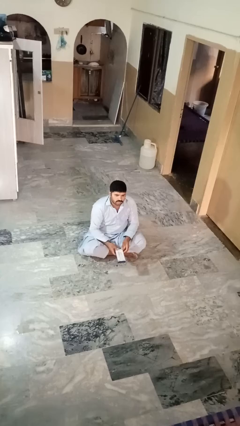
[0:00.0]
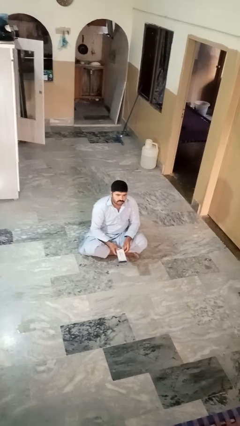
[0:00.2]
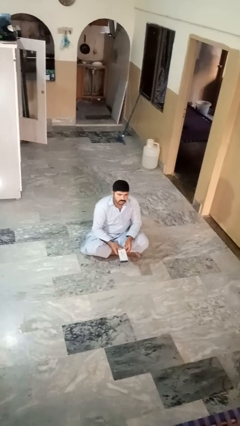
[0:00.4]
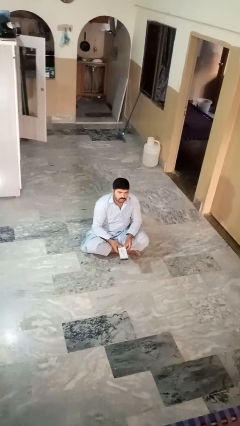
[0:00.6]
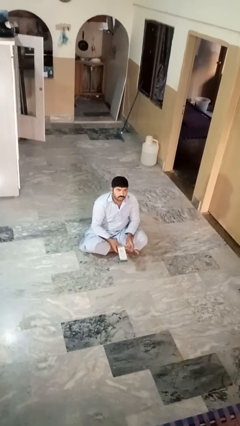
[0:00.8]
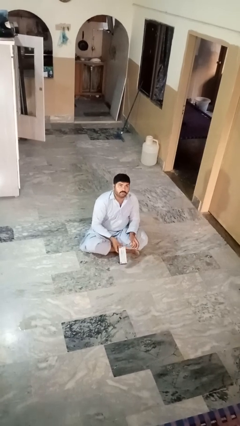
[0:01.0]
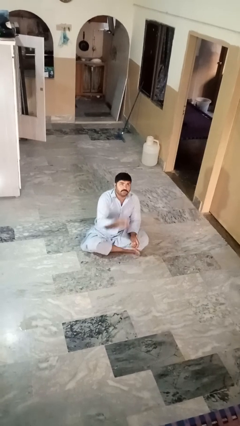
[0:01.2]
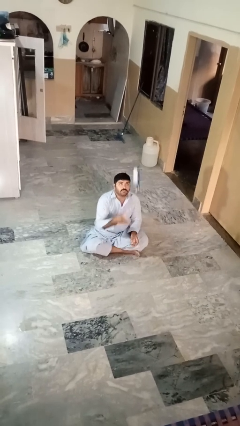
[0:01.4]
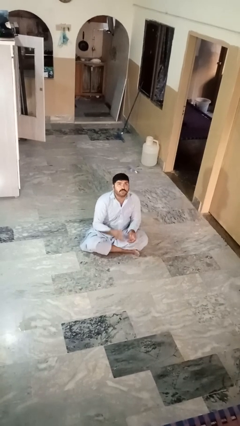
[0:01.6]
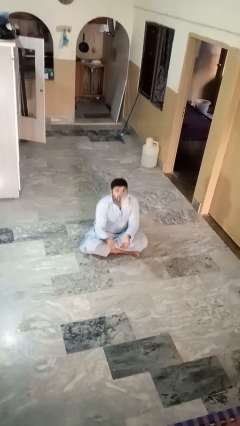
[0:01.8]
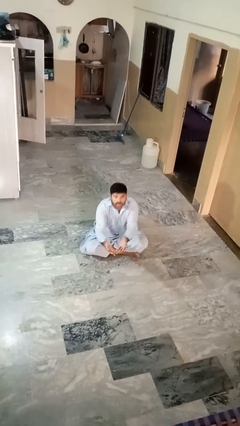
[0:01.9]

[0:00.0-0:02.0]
person drops object

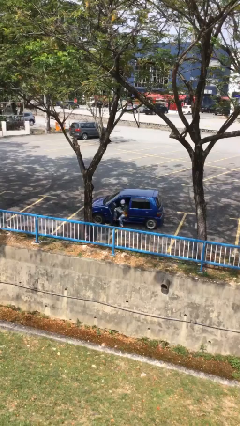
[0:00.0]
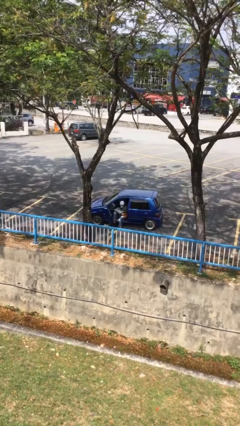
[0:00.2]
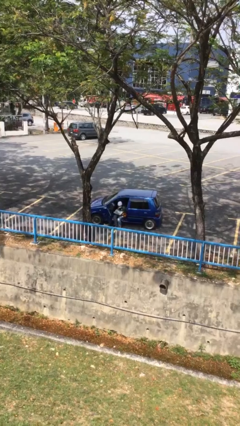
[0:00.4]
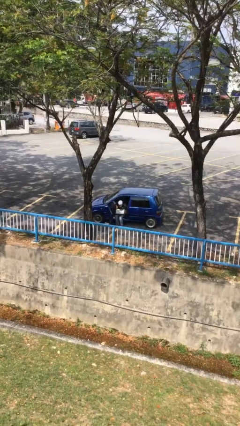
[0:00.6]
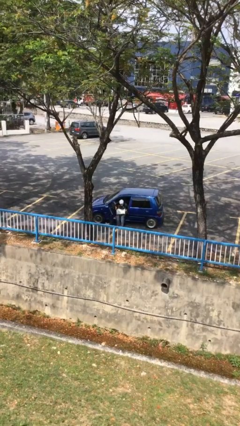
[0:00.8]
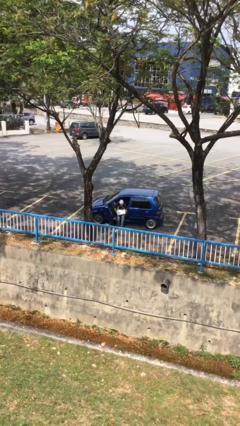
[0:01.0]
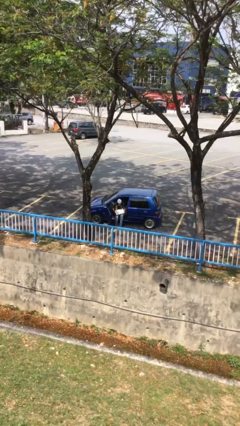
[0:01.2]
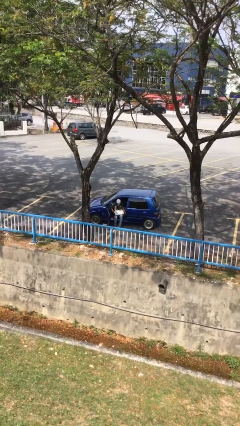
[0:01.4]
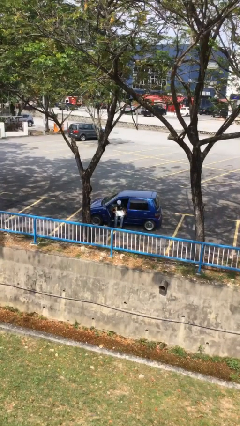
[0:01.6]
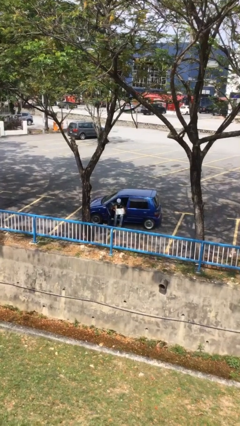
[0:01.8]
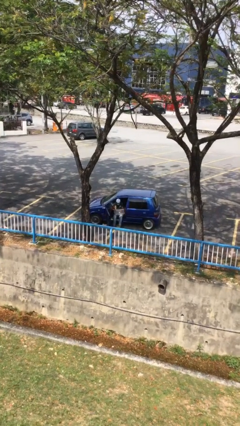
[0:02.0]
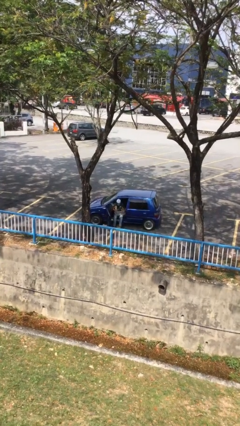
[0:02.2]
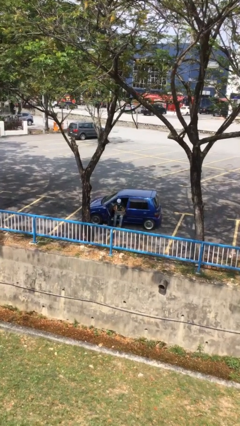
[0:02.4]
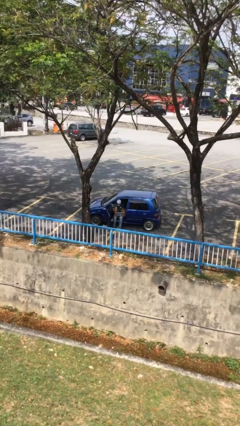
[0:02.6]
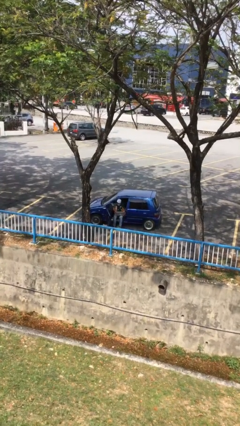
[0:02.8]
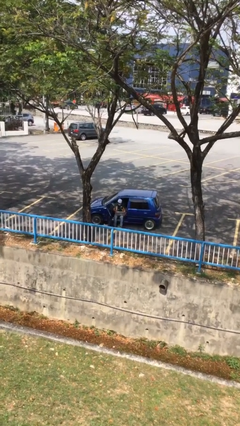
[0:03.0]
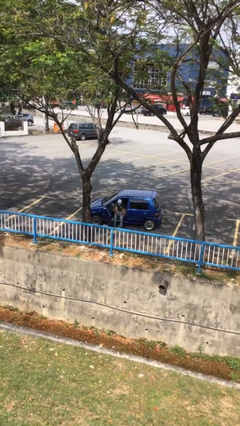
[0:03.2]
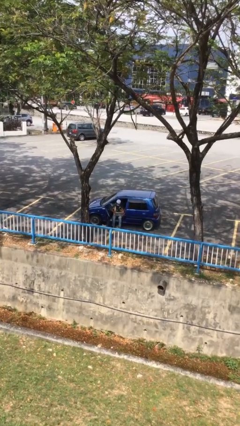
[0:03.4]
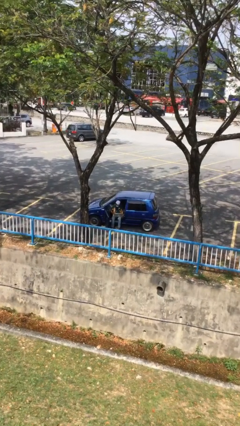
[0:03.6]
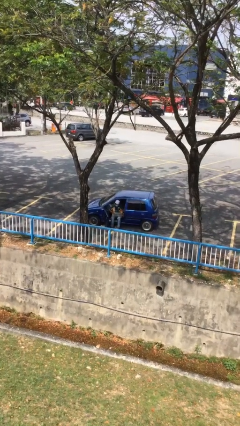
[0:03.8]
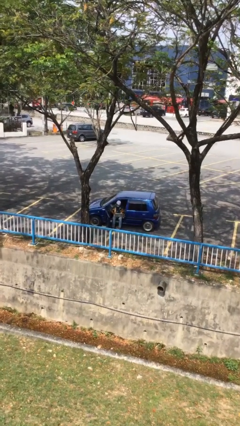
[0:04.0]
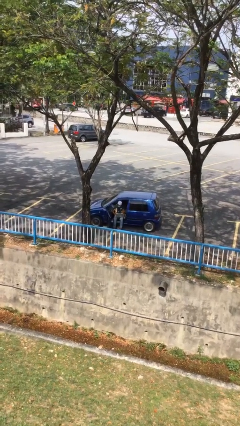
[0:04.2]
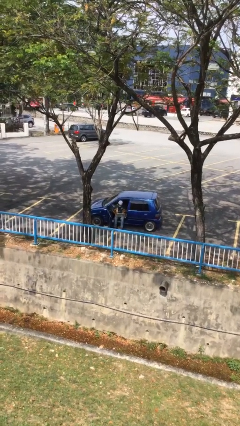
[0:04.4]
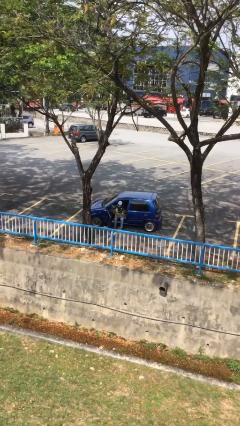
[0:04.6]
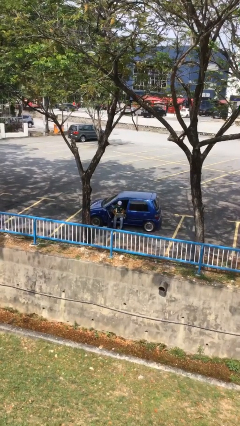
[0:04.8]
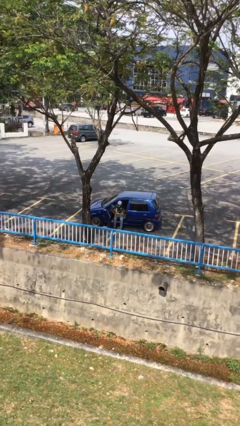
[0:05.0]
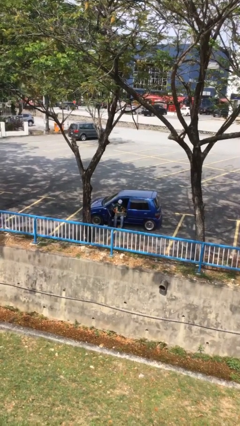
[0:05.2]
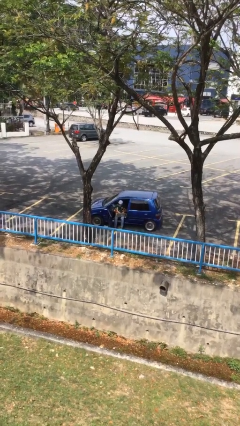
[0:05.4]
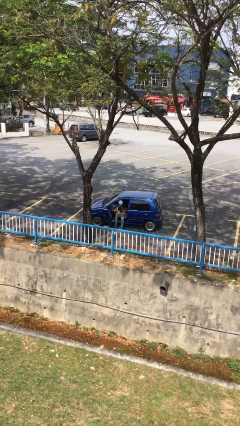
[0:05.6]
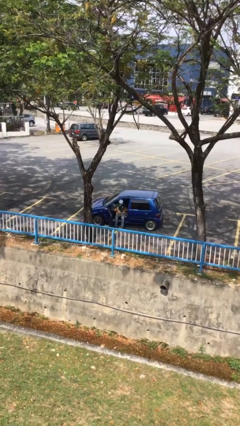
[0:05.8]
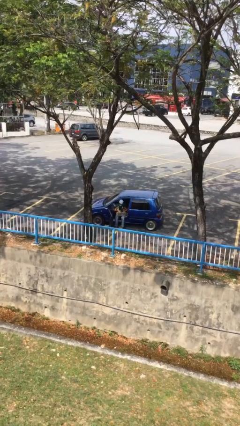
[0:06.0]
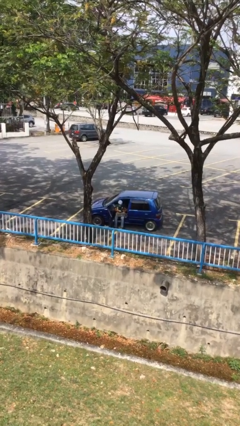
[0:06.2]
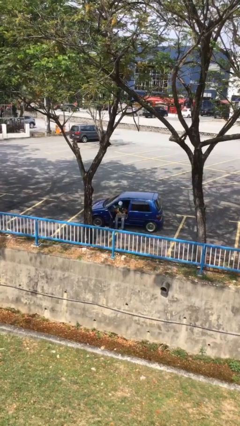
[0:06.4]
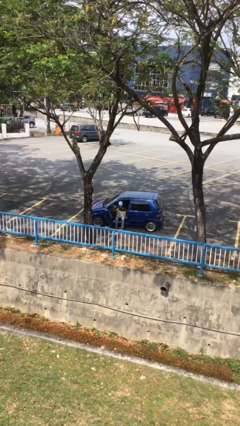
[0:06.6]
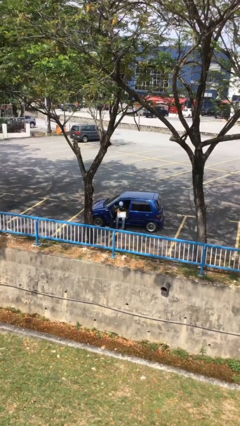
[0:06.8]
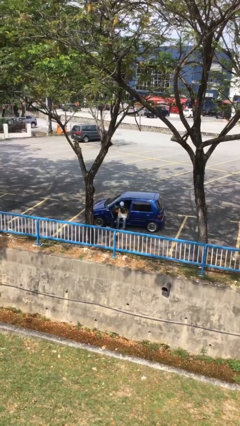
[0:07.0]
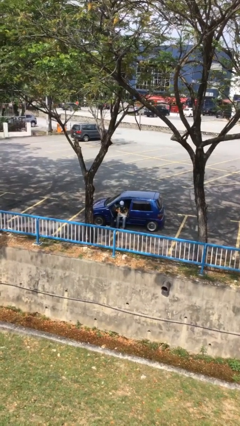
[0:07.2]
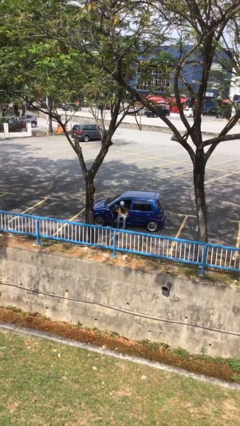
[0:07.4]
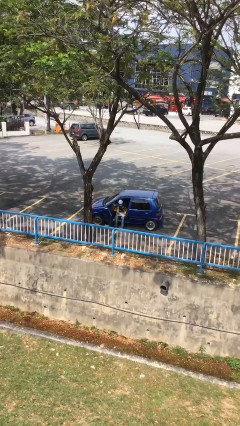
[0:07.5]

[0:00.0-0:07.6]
person interacts with laptop

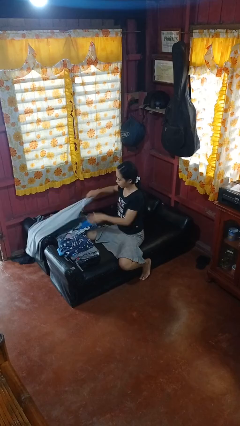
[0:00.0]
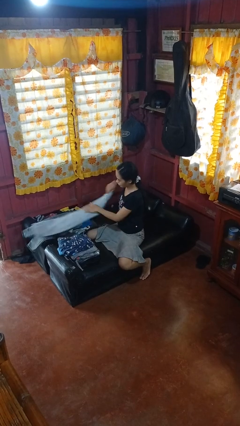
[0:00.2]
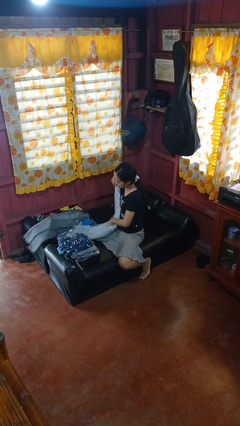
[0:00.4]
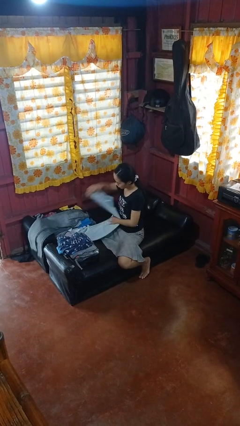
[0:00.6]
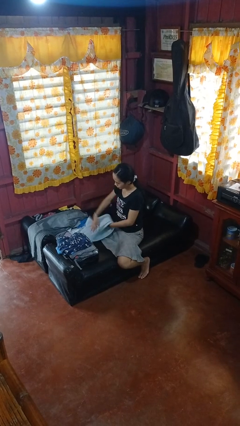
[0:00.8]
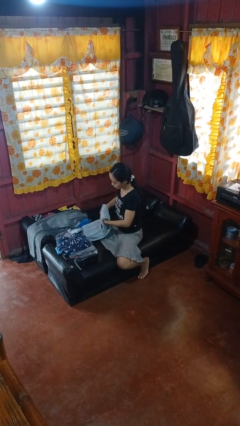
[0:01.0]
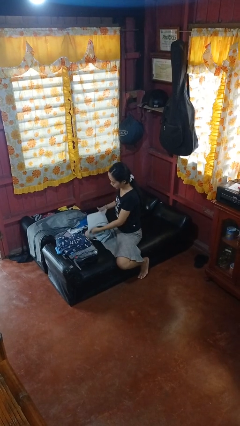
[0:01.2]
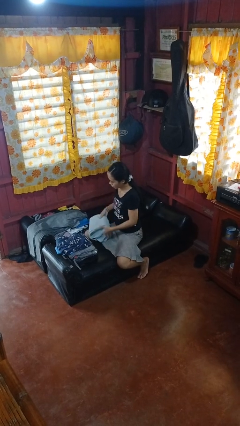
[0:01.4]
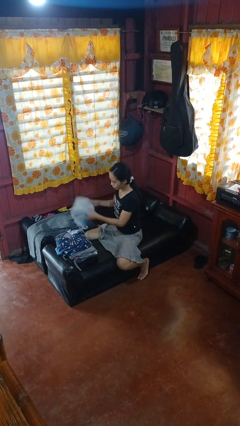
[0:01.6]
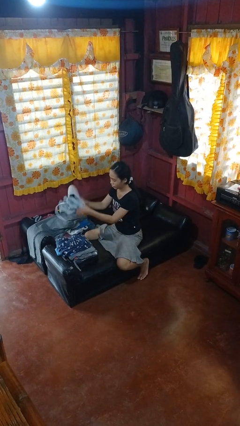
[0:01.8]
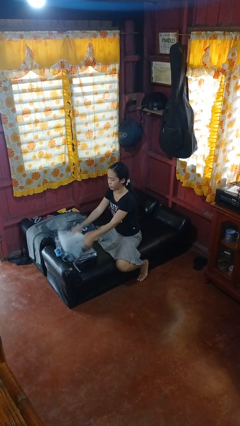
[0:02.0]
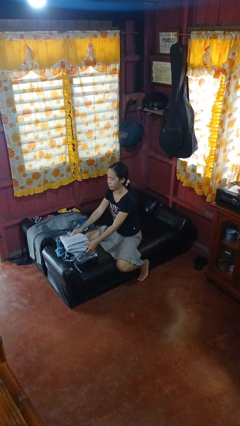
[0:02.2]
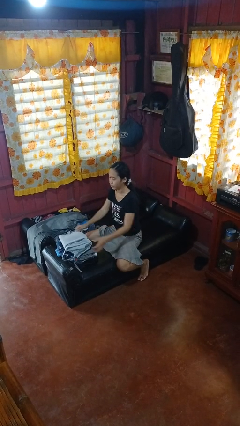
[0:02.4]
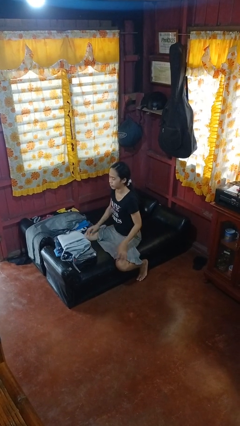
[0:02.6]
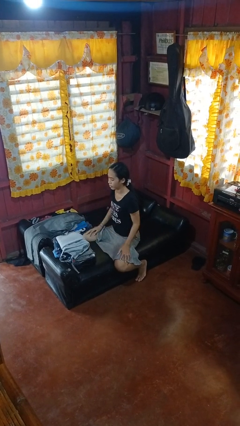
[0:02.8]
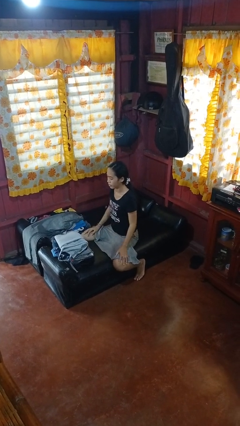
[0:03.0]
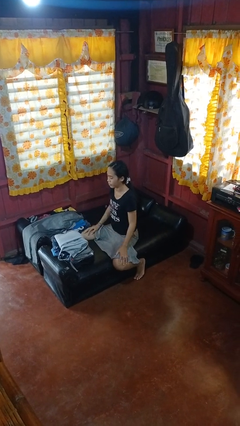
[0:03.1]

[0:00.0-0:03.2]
person folds pants

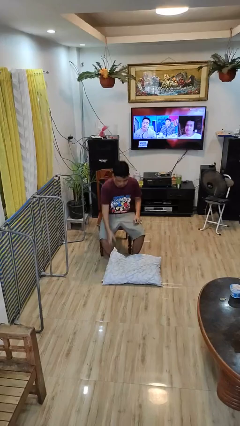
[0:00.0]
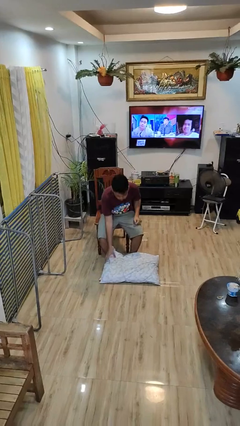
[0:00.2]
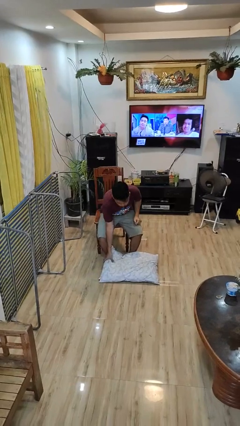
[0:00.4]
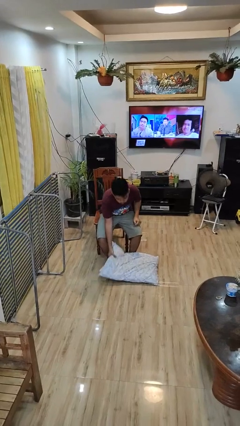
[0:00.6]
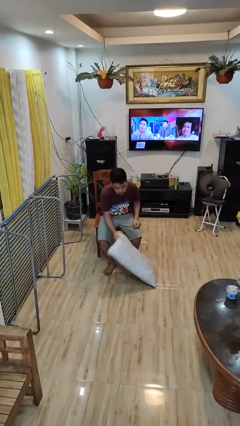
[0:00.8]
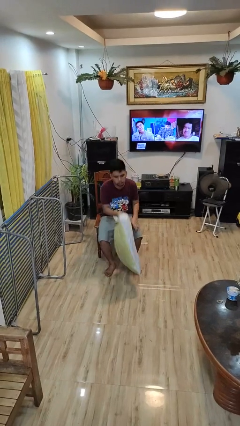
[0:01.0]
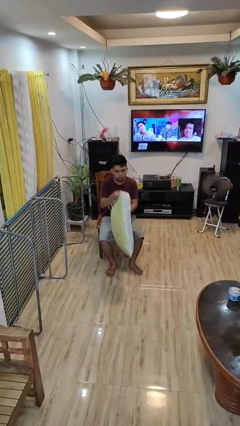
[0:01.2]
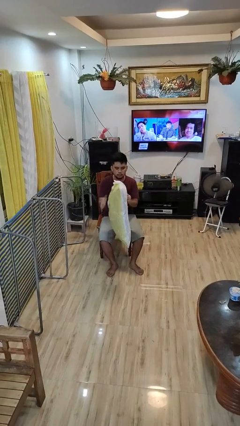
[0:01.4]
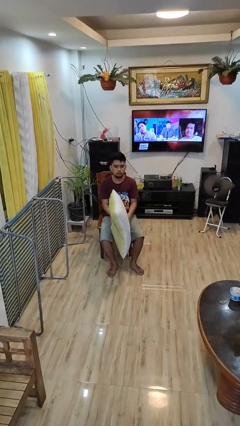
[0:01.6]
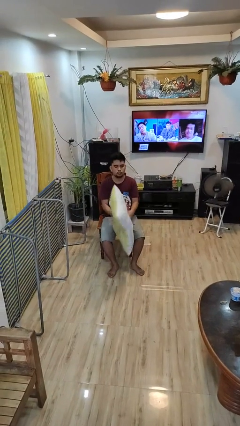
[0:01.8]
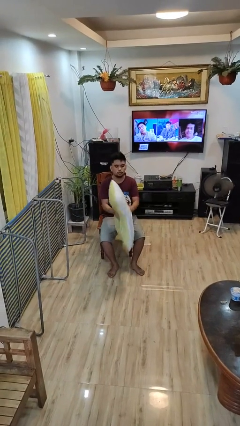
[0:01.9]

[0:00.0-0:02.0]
person picks up object from floor

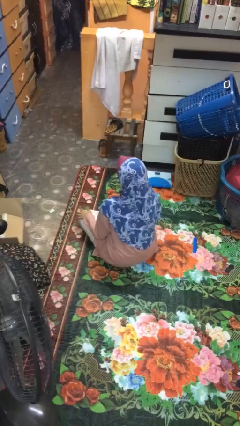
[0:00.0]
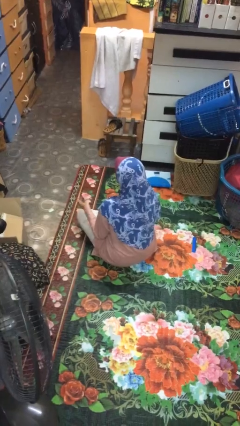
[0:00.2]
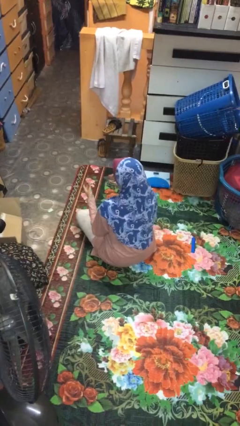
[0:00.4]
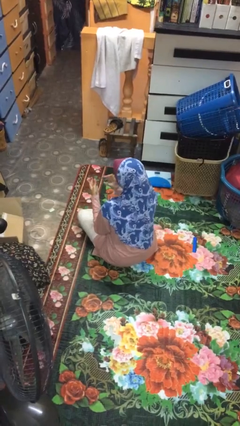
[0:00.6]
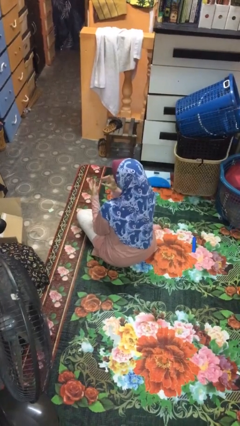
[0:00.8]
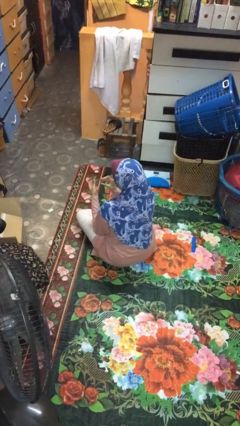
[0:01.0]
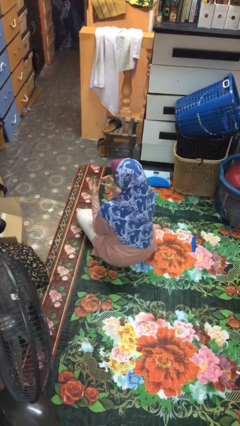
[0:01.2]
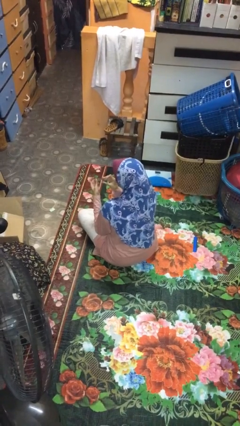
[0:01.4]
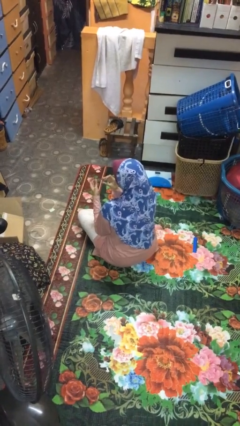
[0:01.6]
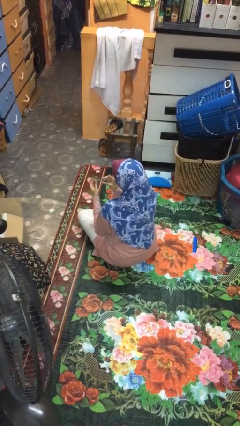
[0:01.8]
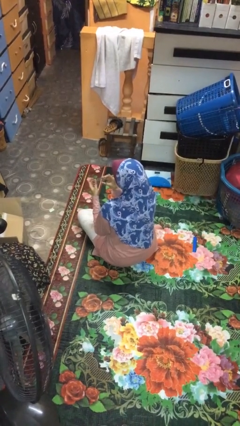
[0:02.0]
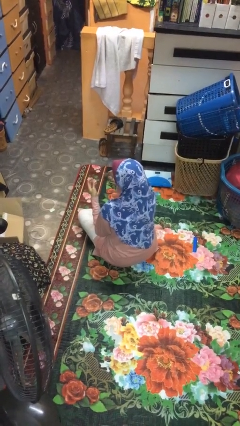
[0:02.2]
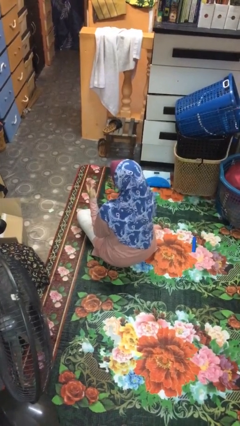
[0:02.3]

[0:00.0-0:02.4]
person clips fingernails

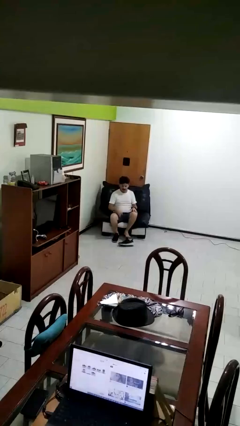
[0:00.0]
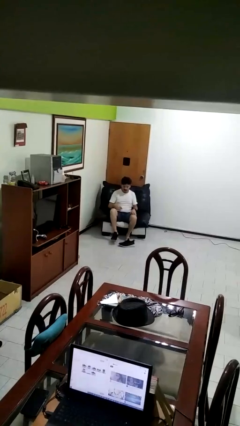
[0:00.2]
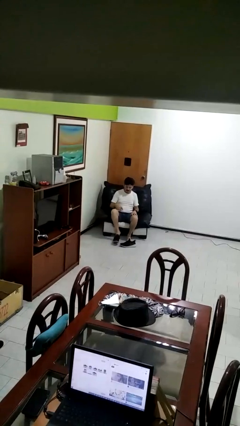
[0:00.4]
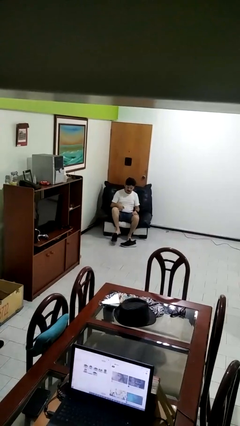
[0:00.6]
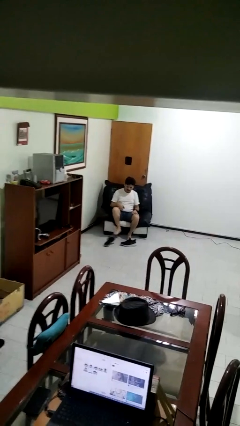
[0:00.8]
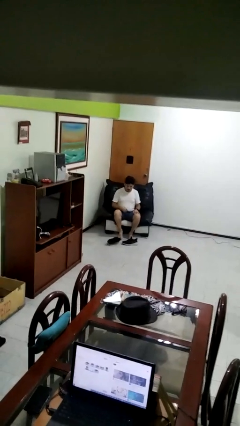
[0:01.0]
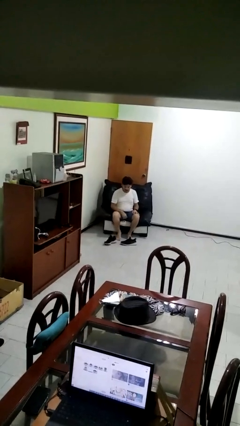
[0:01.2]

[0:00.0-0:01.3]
person takes off shoes
